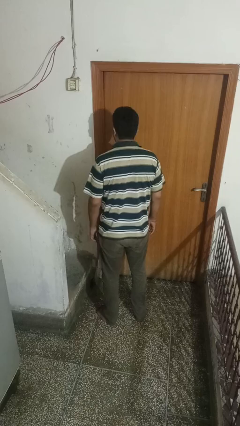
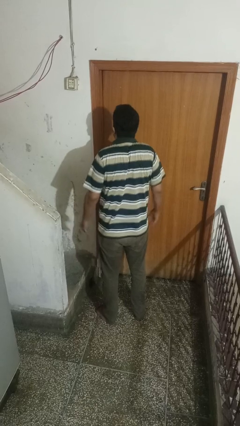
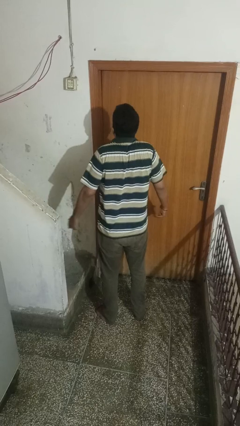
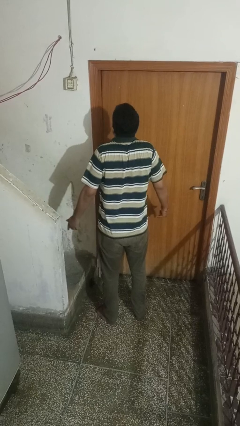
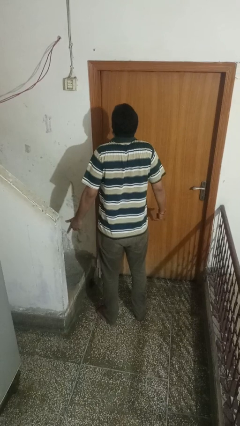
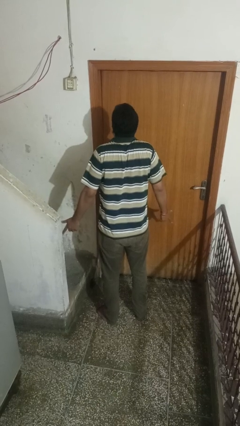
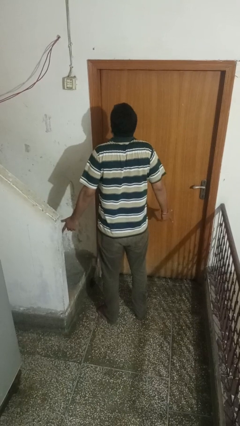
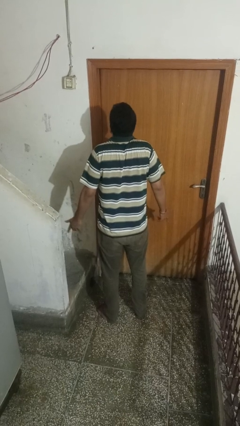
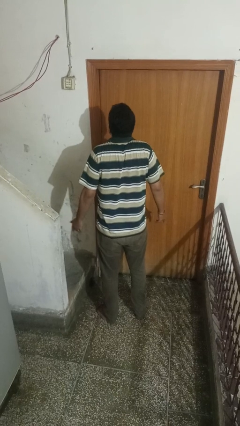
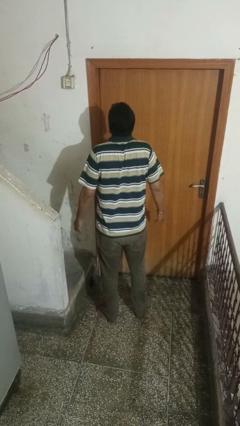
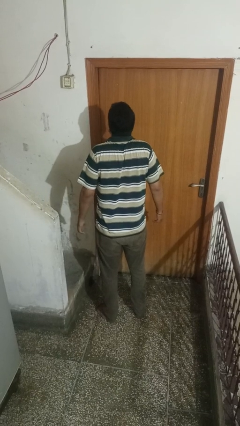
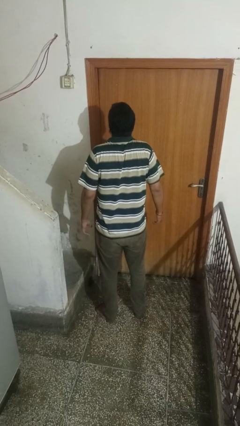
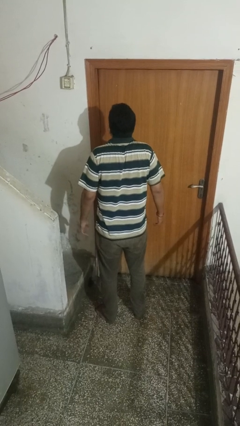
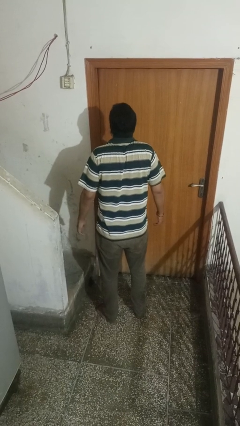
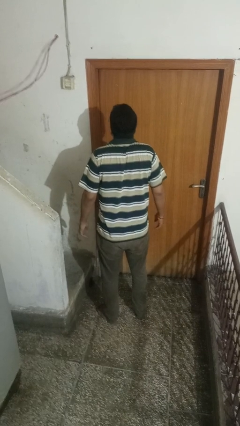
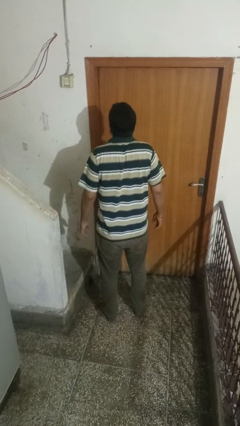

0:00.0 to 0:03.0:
person shrugs

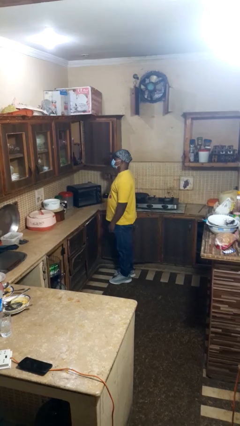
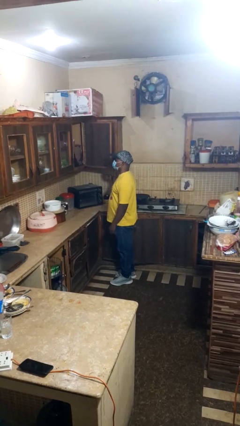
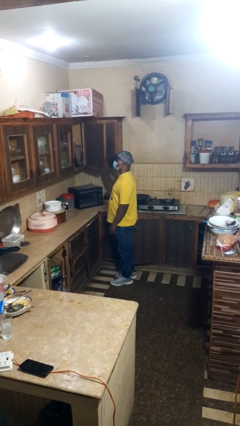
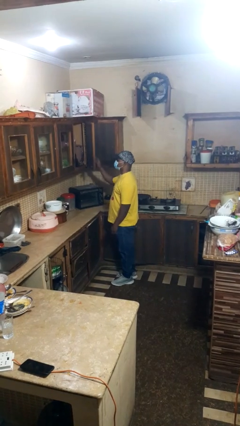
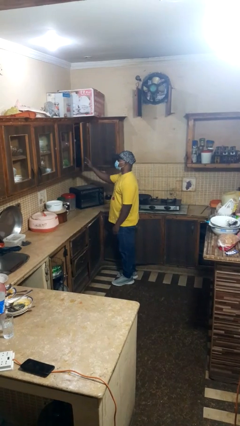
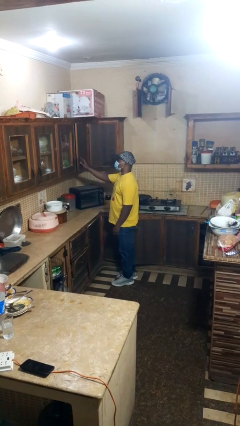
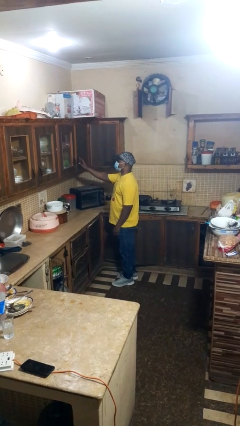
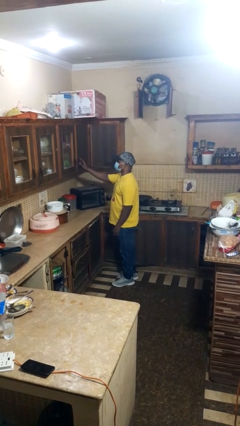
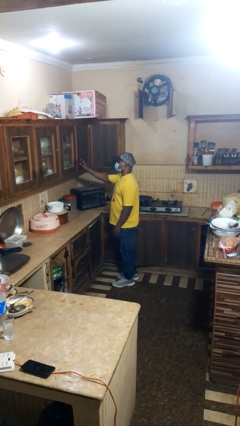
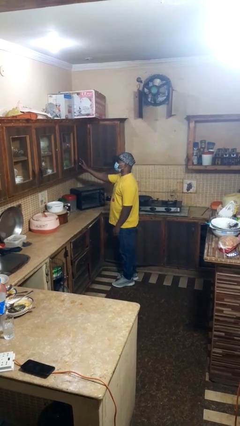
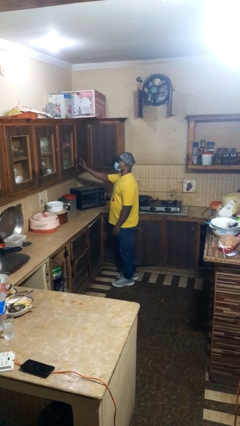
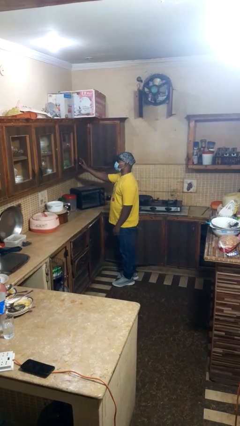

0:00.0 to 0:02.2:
person closes cabinet

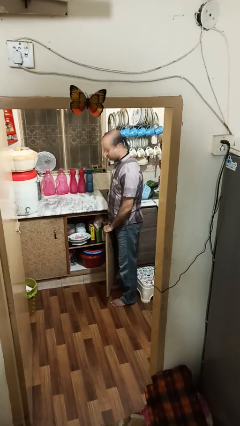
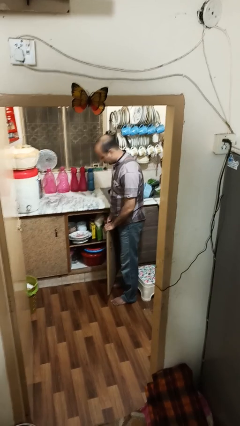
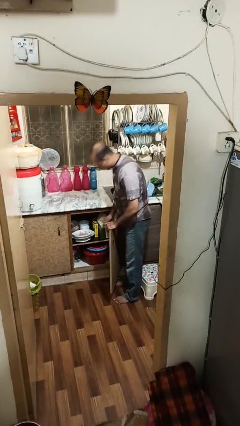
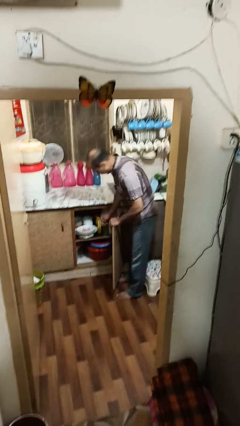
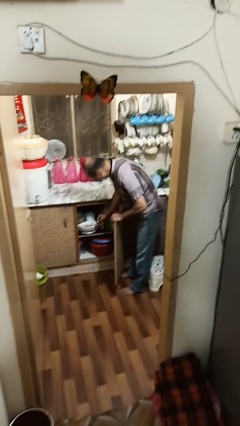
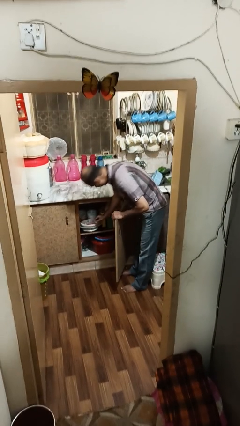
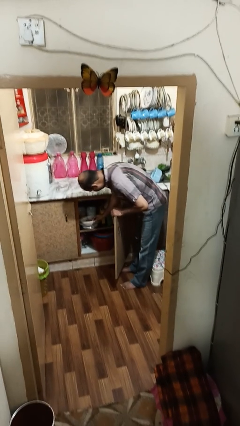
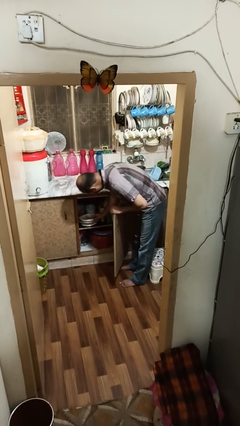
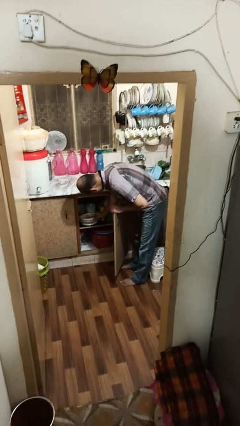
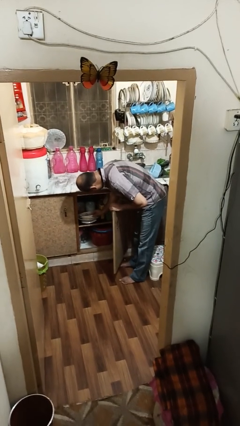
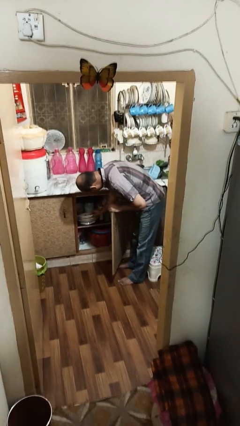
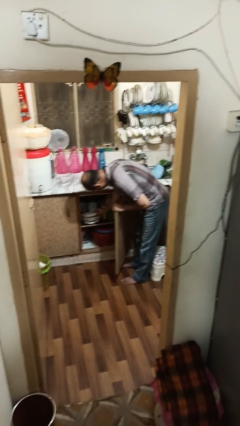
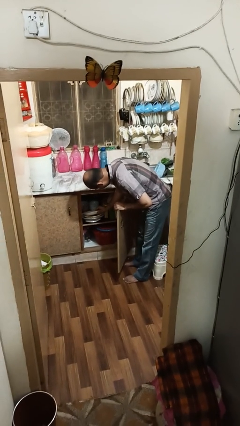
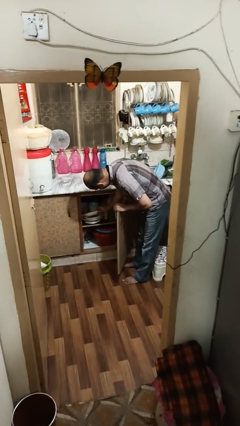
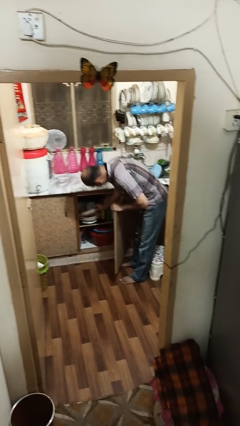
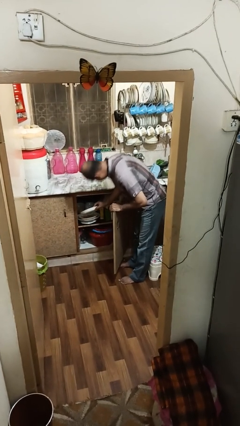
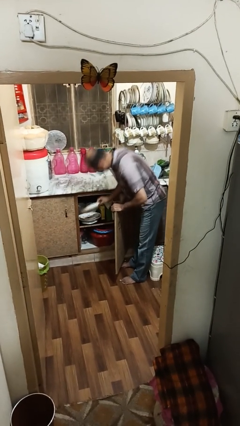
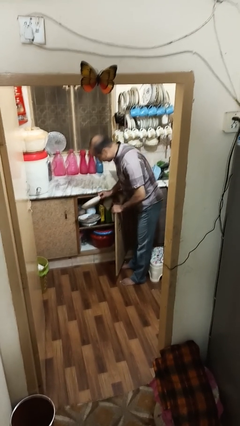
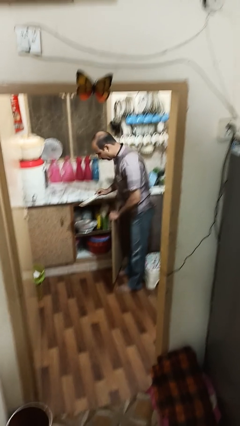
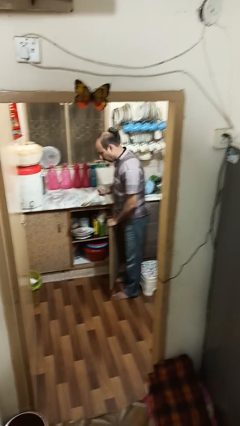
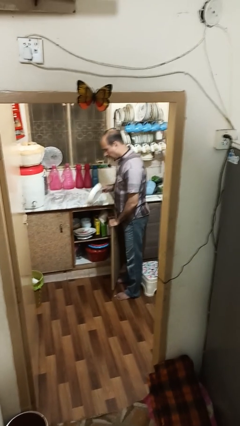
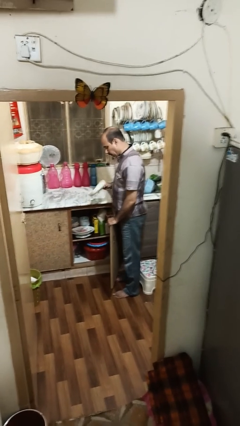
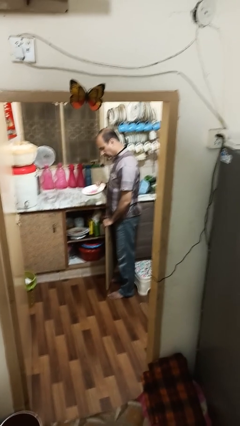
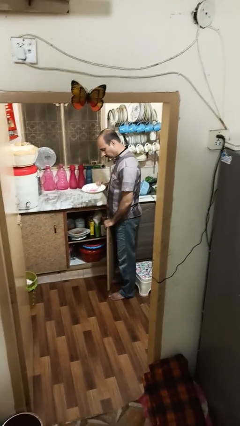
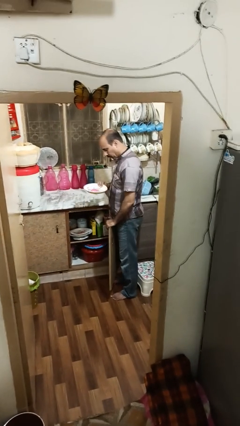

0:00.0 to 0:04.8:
person takes object from cabinet

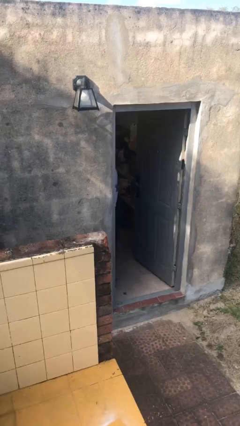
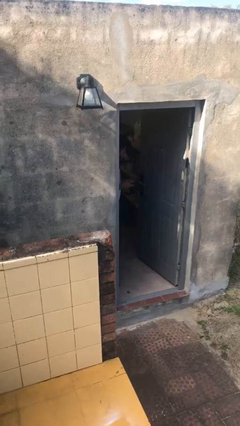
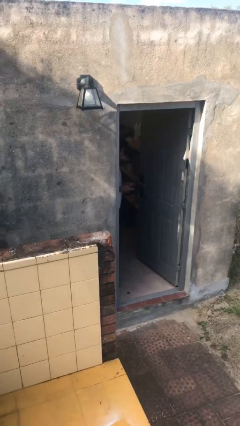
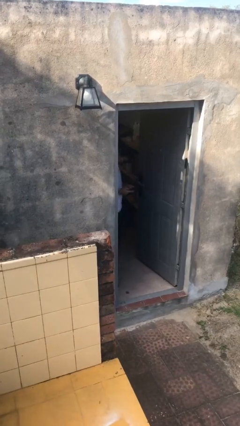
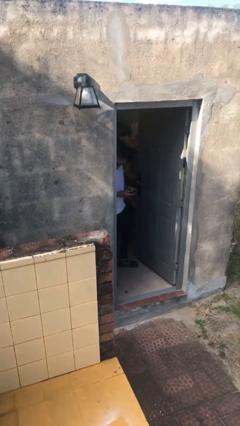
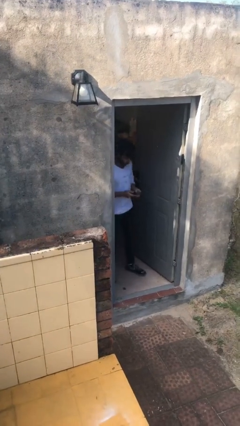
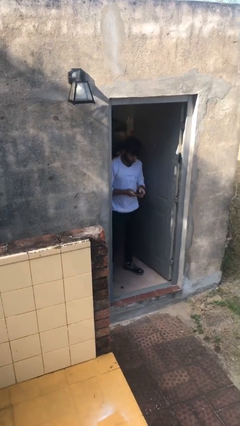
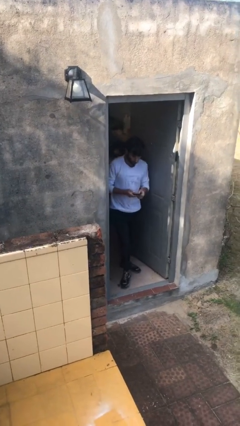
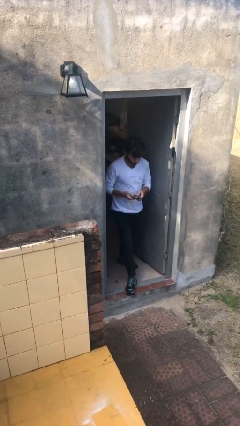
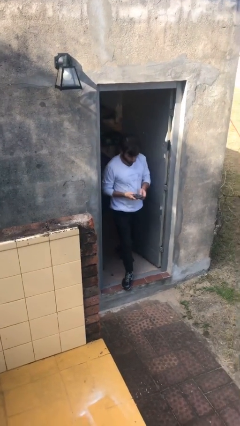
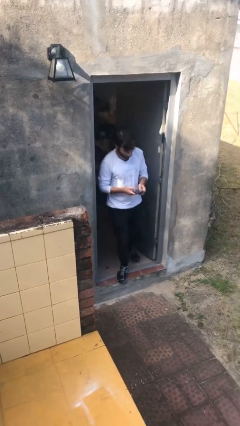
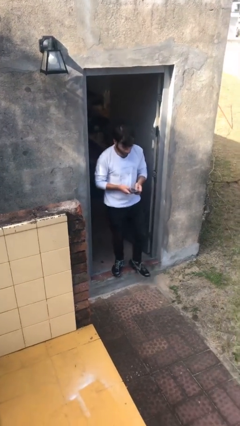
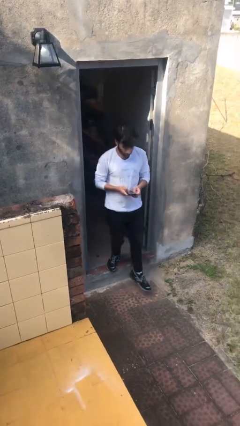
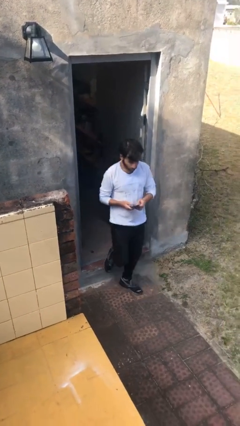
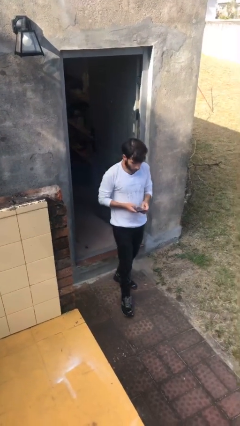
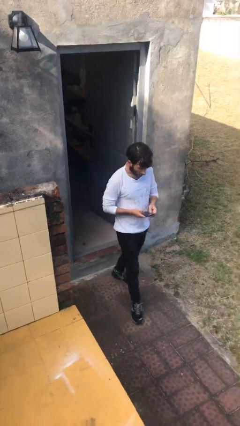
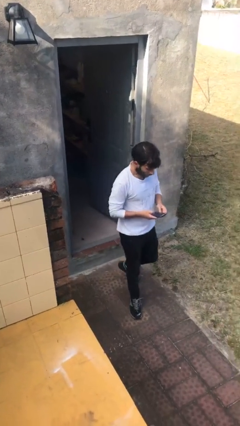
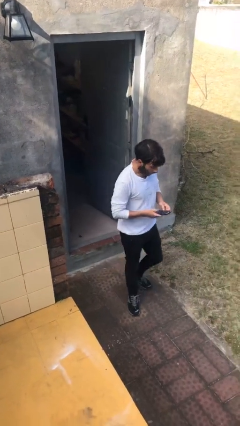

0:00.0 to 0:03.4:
person enters scene through structure

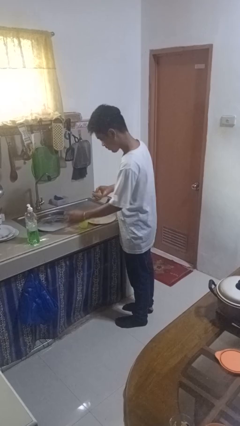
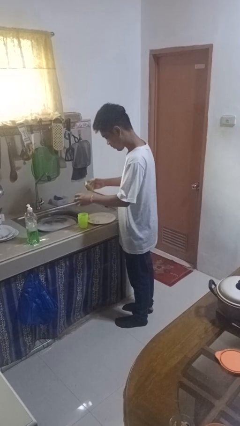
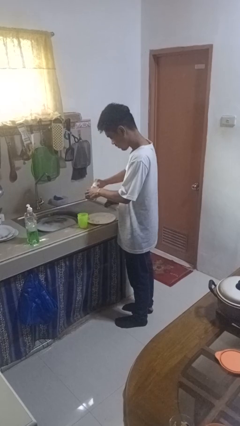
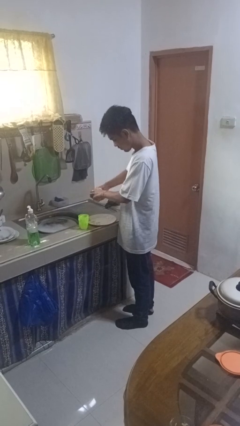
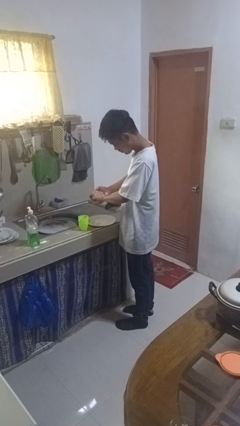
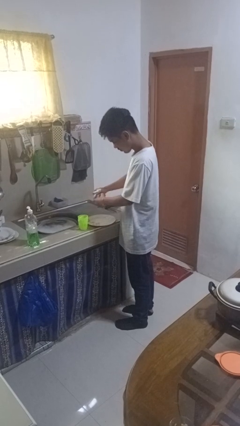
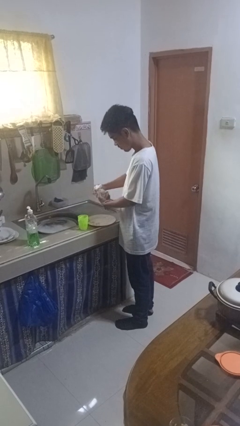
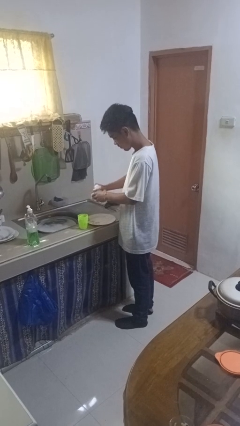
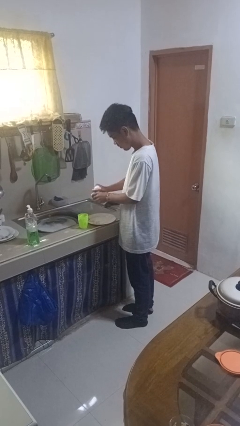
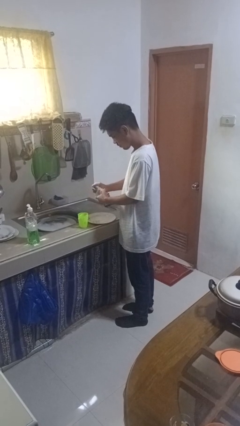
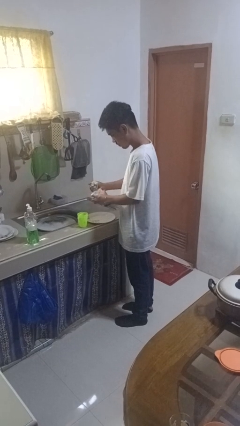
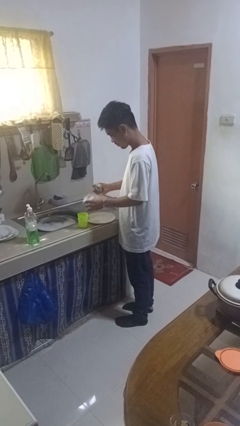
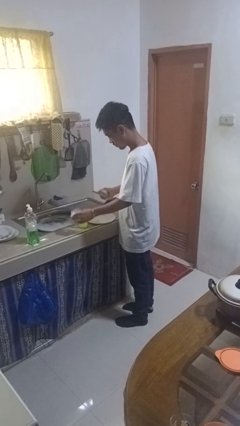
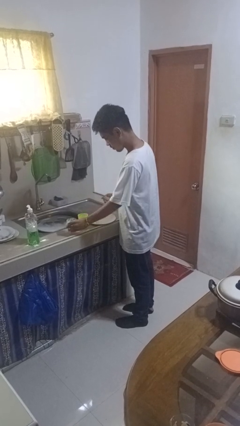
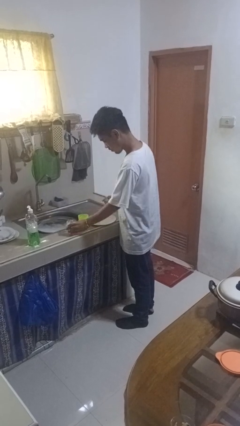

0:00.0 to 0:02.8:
person washes dish

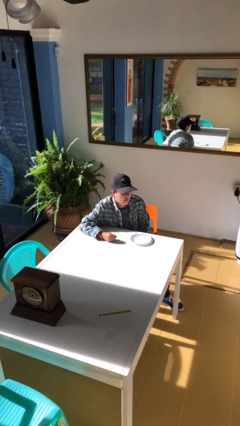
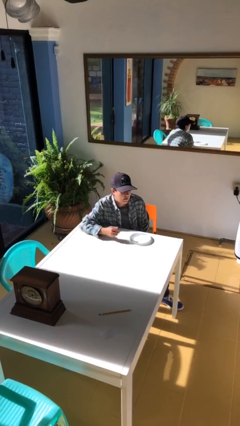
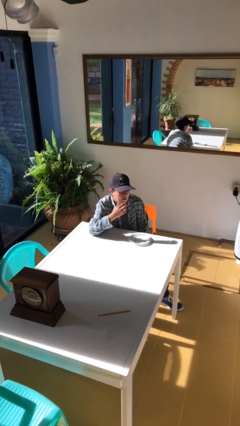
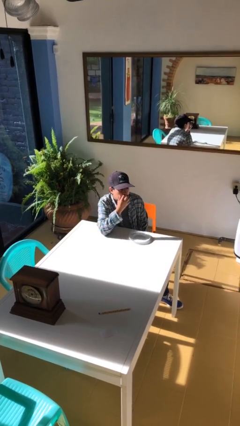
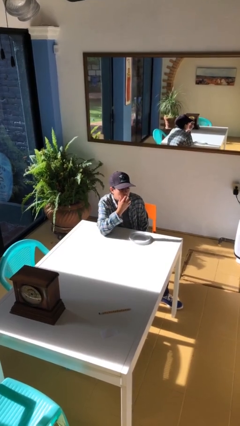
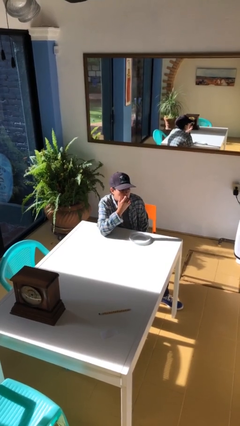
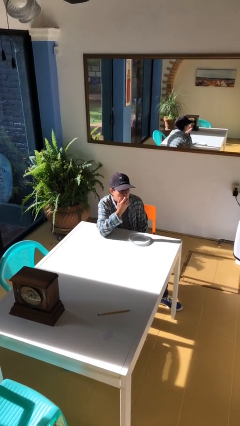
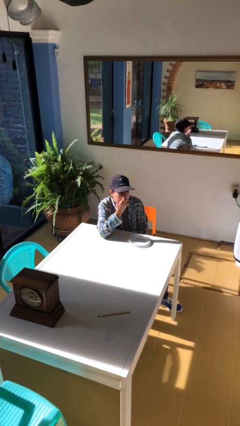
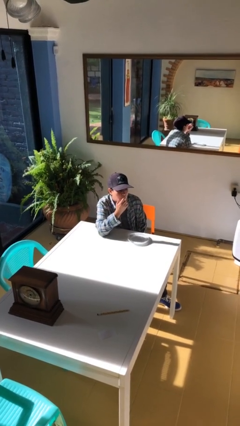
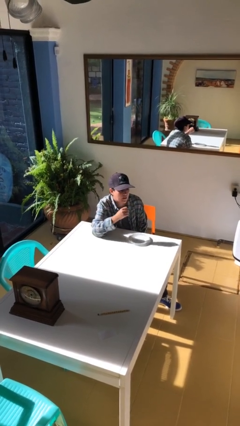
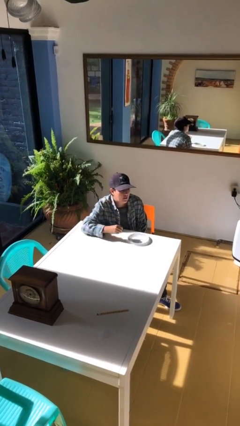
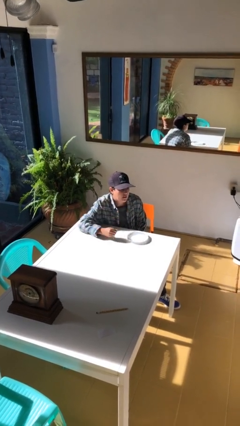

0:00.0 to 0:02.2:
person licks fingers
